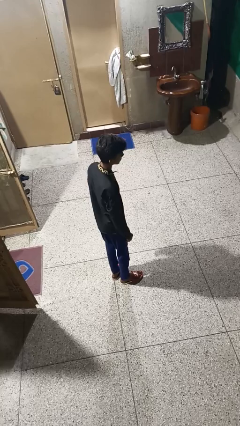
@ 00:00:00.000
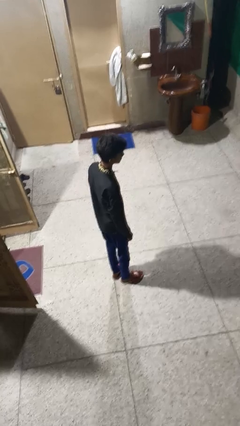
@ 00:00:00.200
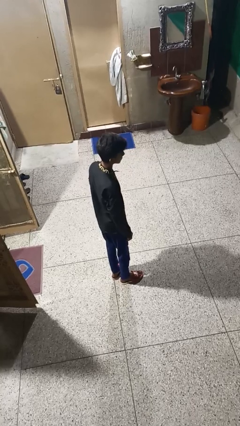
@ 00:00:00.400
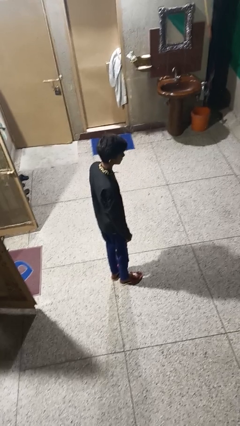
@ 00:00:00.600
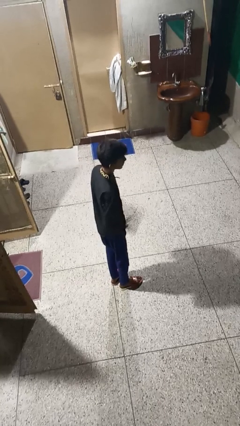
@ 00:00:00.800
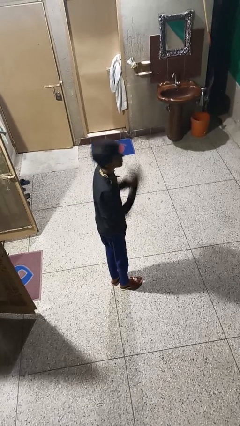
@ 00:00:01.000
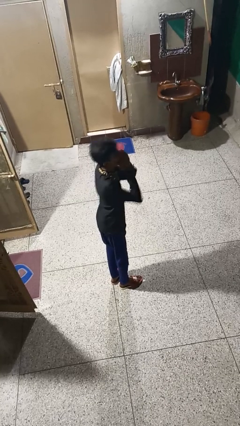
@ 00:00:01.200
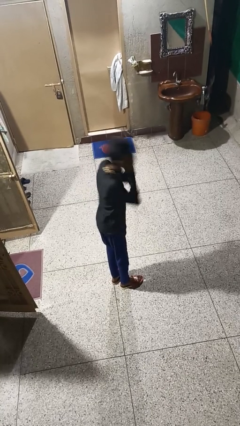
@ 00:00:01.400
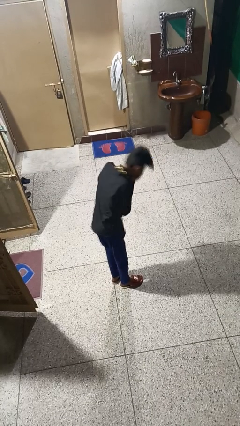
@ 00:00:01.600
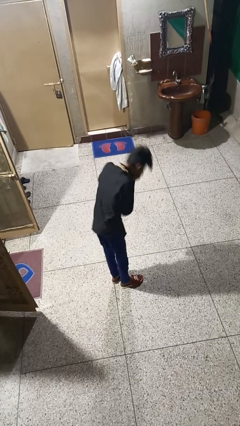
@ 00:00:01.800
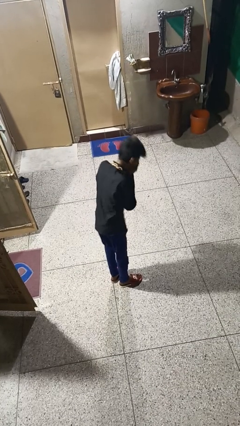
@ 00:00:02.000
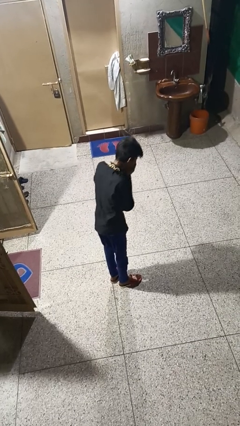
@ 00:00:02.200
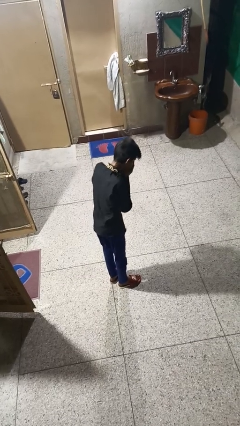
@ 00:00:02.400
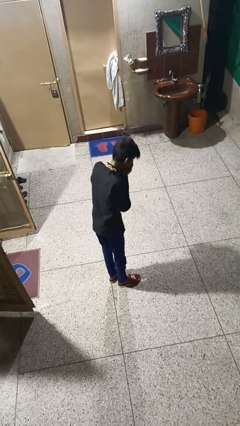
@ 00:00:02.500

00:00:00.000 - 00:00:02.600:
person sneezes into hand

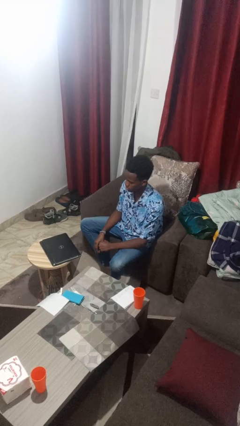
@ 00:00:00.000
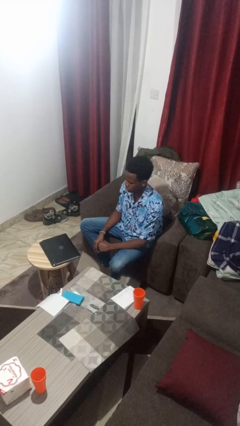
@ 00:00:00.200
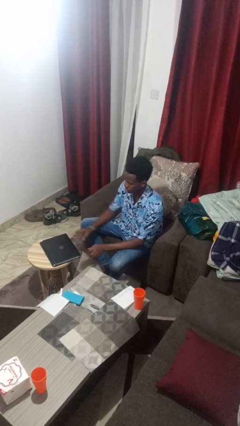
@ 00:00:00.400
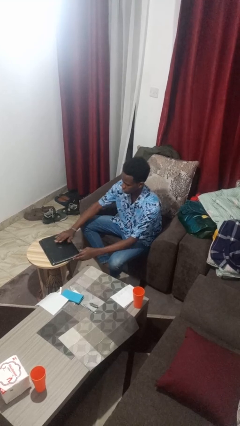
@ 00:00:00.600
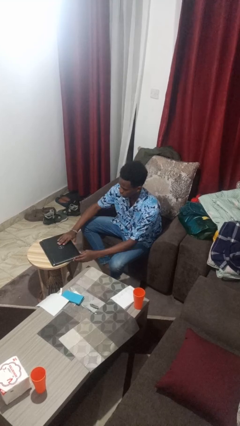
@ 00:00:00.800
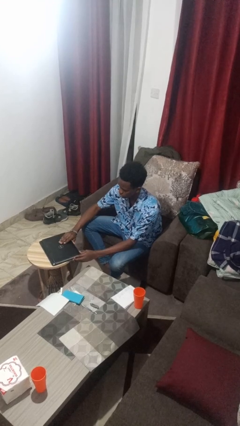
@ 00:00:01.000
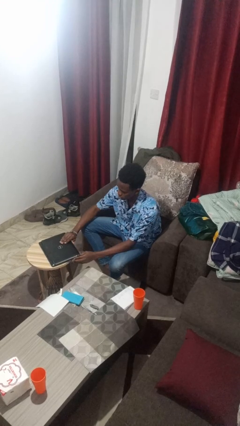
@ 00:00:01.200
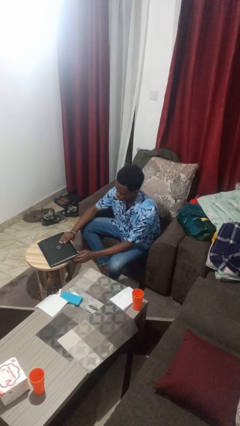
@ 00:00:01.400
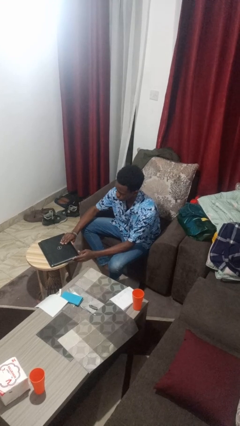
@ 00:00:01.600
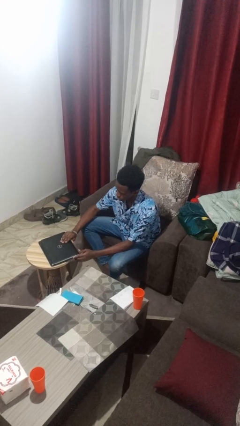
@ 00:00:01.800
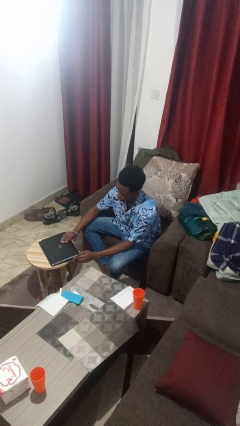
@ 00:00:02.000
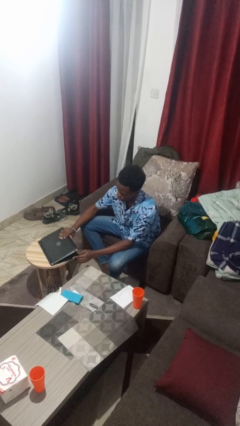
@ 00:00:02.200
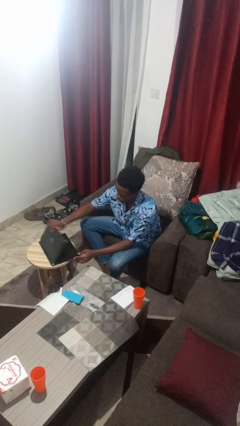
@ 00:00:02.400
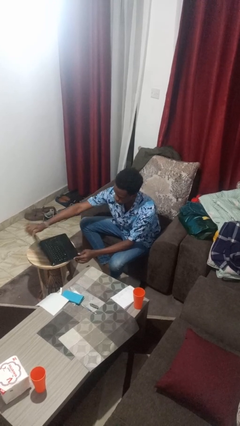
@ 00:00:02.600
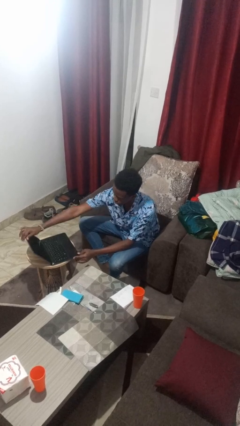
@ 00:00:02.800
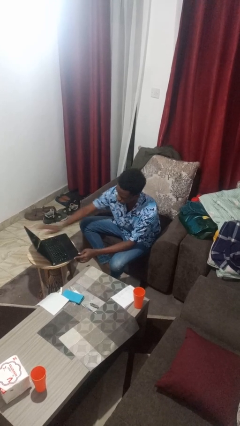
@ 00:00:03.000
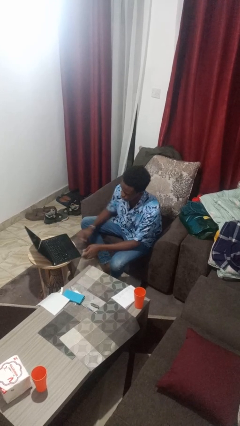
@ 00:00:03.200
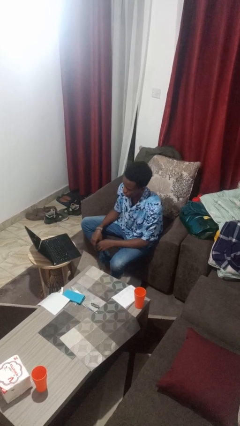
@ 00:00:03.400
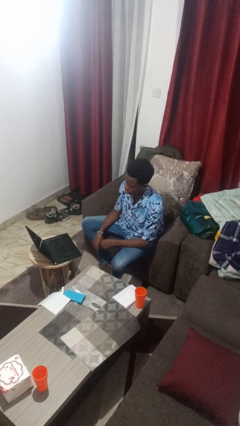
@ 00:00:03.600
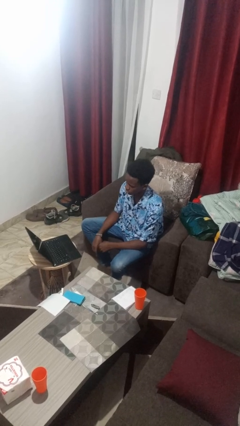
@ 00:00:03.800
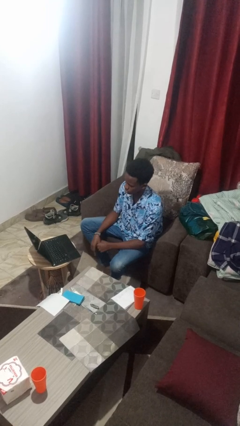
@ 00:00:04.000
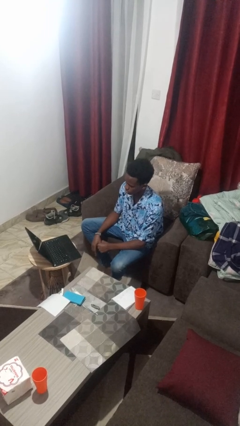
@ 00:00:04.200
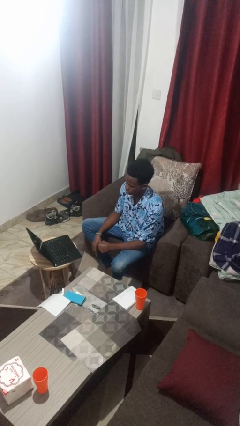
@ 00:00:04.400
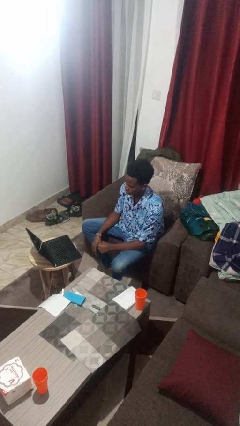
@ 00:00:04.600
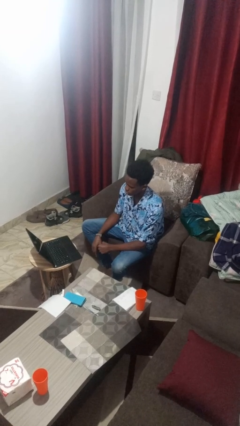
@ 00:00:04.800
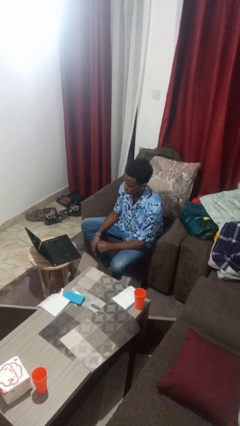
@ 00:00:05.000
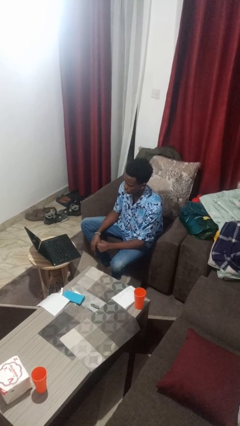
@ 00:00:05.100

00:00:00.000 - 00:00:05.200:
person opens laptop

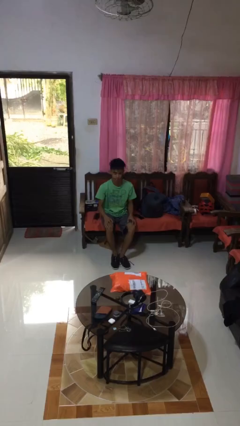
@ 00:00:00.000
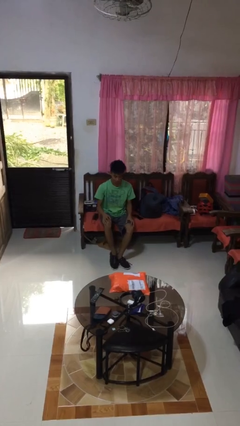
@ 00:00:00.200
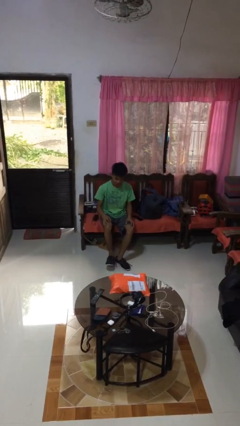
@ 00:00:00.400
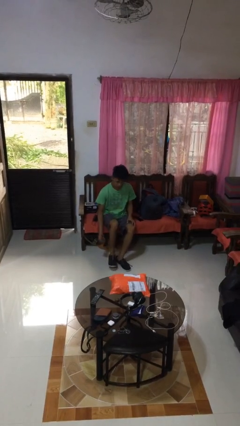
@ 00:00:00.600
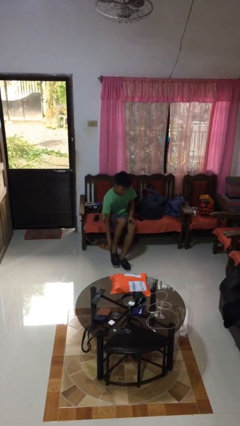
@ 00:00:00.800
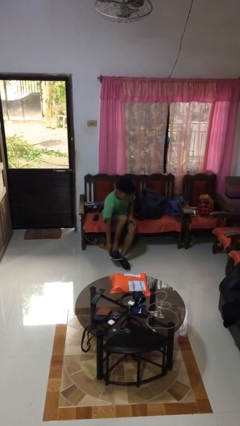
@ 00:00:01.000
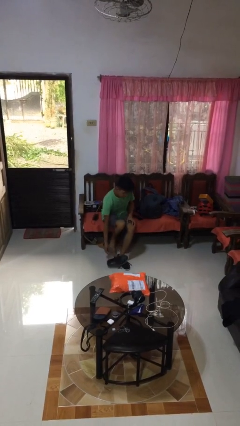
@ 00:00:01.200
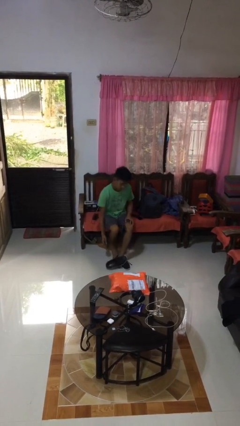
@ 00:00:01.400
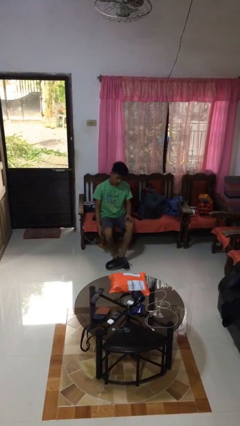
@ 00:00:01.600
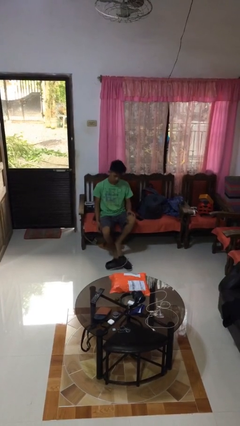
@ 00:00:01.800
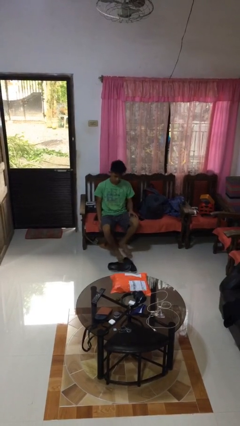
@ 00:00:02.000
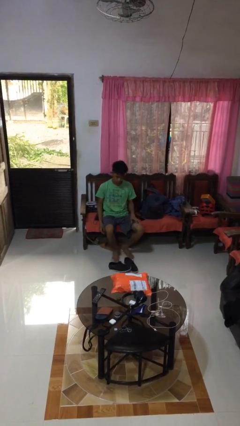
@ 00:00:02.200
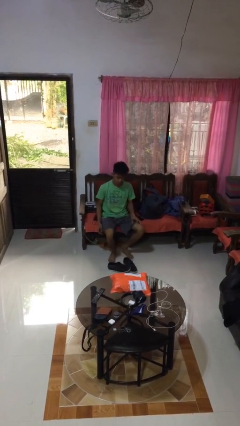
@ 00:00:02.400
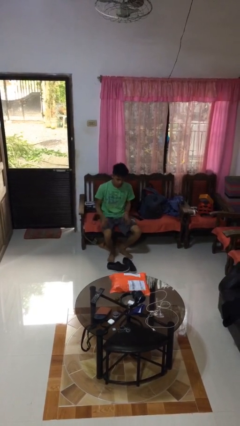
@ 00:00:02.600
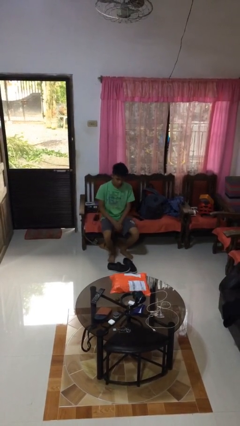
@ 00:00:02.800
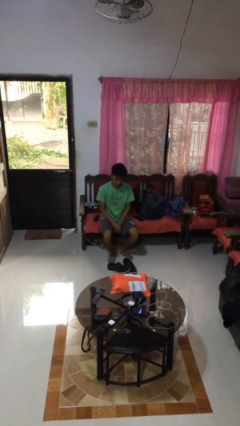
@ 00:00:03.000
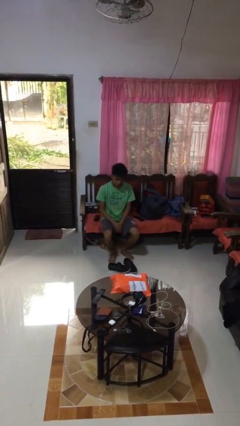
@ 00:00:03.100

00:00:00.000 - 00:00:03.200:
person takes off shoes

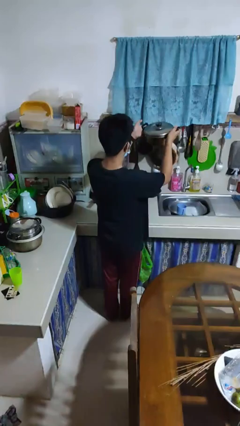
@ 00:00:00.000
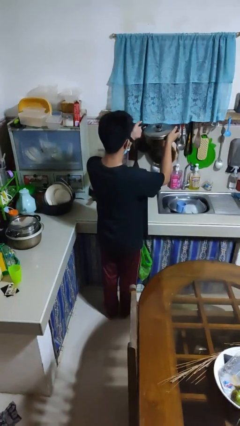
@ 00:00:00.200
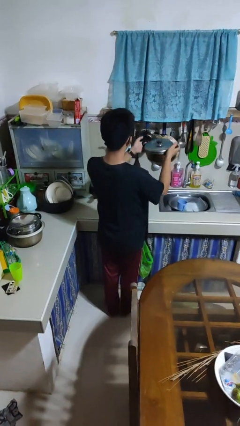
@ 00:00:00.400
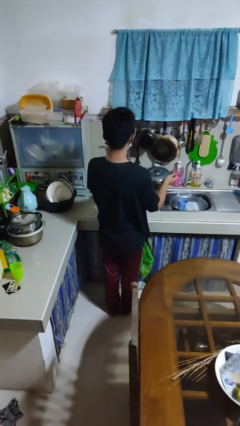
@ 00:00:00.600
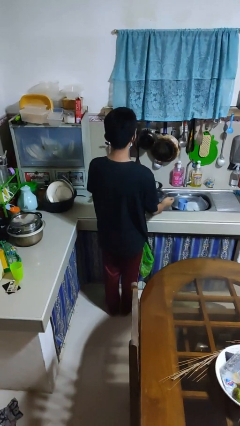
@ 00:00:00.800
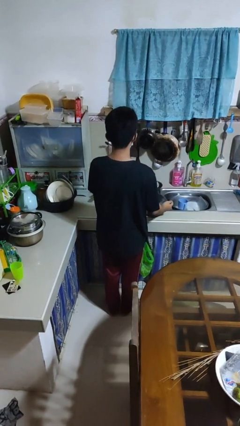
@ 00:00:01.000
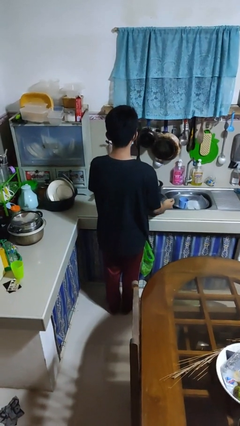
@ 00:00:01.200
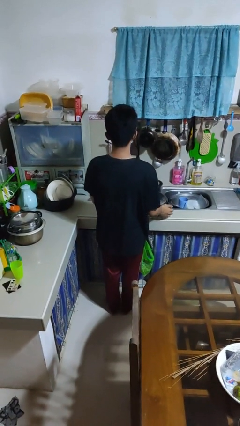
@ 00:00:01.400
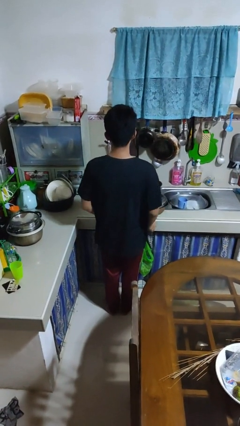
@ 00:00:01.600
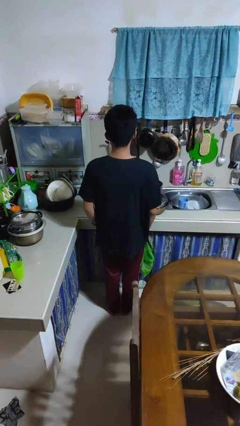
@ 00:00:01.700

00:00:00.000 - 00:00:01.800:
person puts down object on countertop

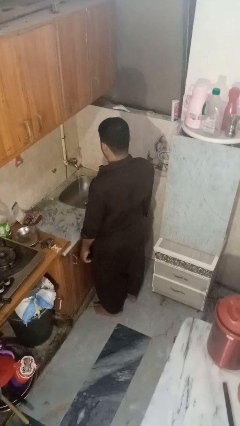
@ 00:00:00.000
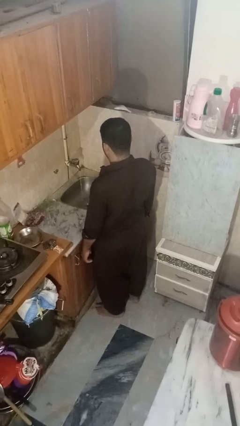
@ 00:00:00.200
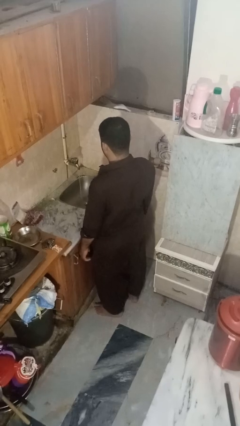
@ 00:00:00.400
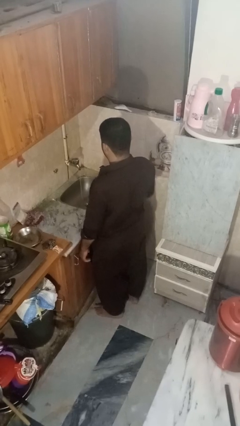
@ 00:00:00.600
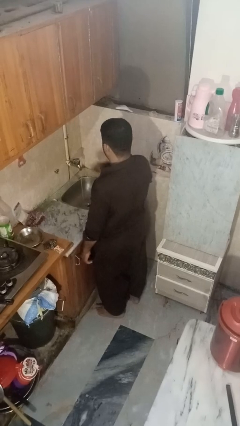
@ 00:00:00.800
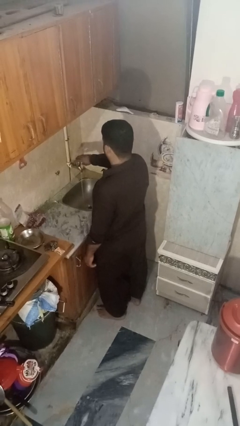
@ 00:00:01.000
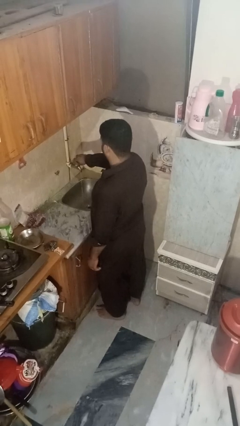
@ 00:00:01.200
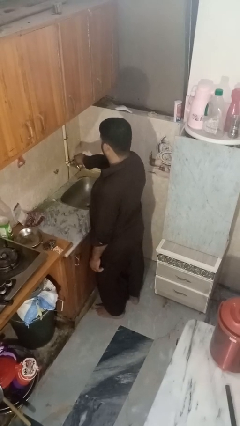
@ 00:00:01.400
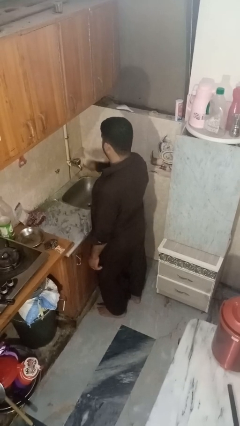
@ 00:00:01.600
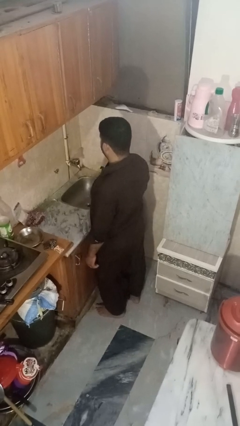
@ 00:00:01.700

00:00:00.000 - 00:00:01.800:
person turns off faucet

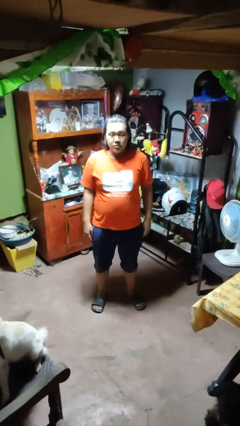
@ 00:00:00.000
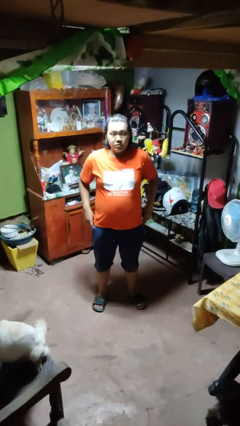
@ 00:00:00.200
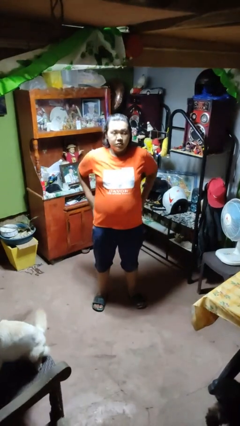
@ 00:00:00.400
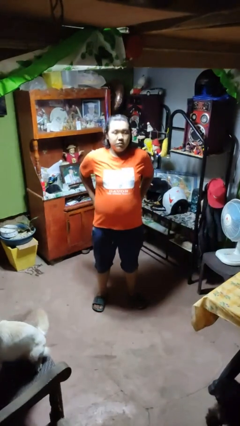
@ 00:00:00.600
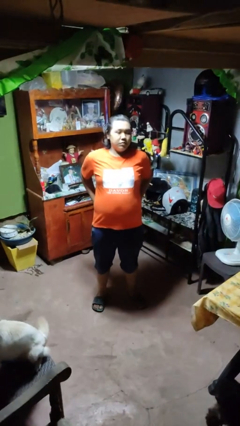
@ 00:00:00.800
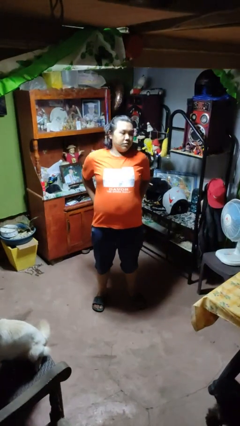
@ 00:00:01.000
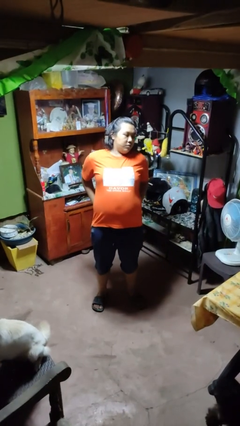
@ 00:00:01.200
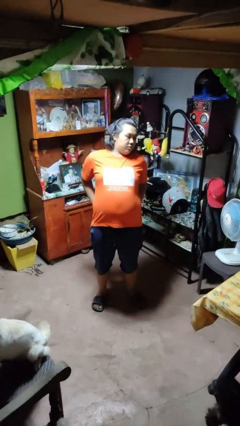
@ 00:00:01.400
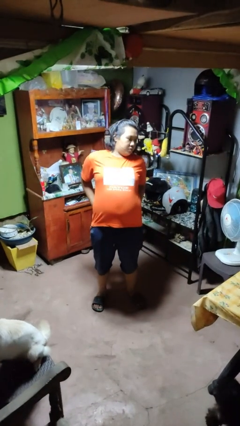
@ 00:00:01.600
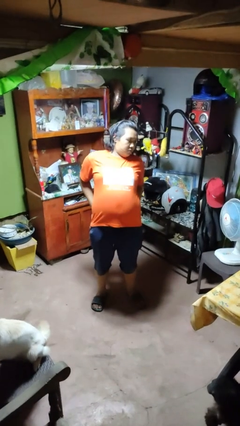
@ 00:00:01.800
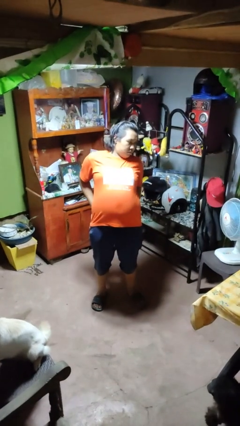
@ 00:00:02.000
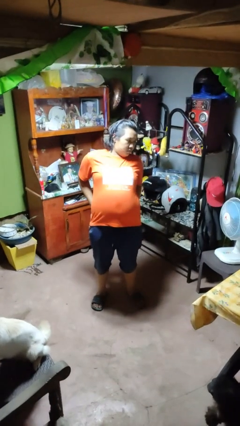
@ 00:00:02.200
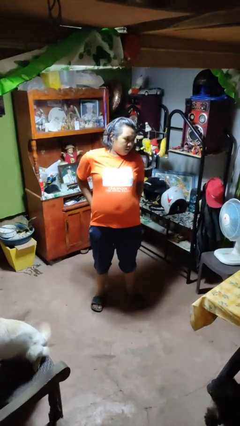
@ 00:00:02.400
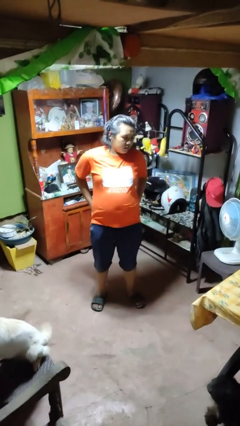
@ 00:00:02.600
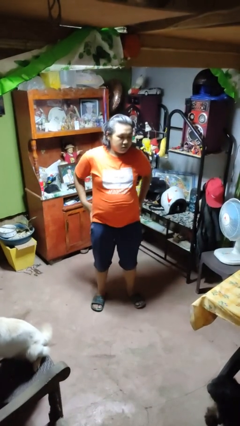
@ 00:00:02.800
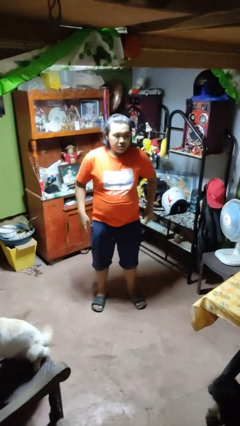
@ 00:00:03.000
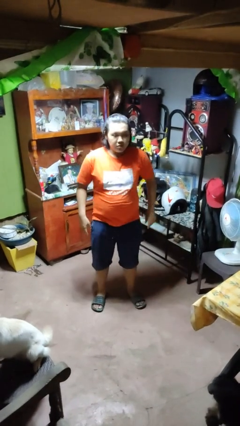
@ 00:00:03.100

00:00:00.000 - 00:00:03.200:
person stretches back
